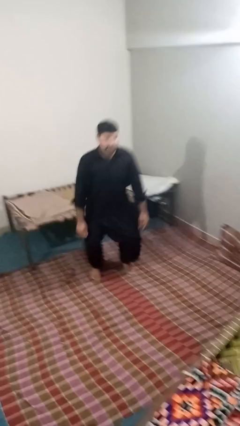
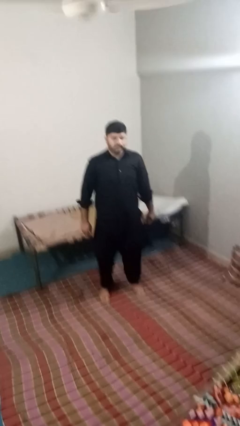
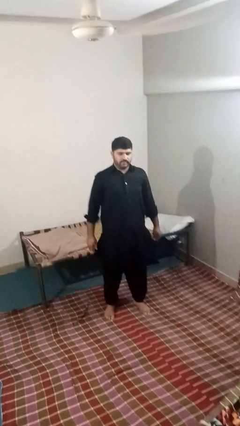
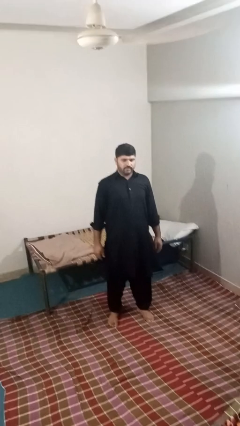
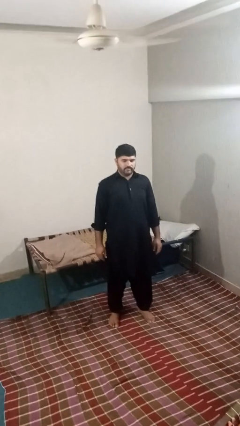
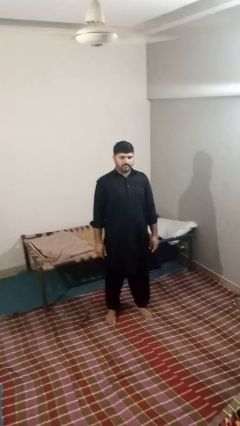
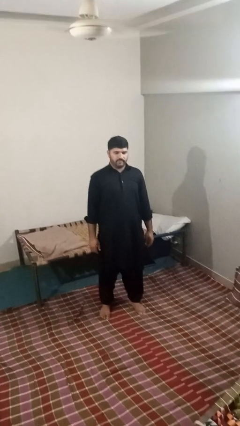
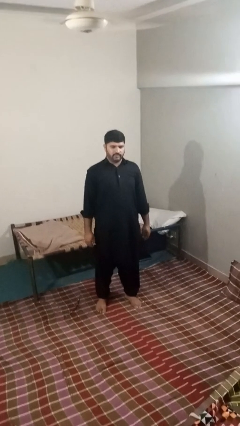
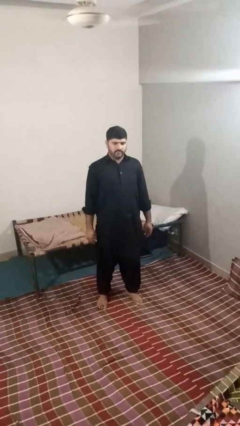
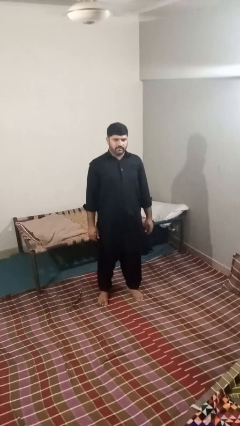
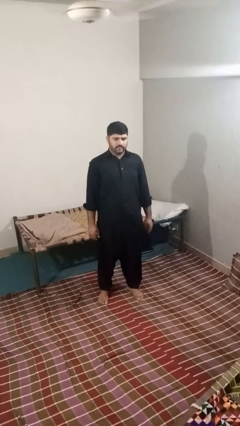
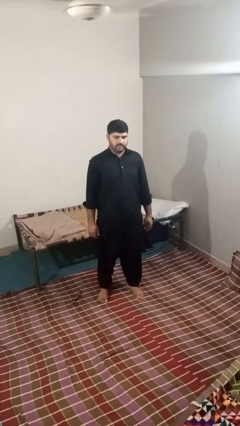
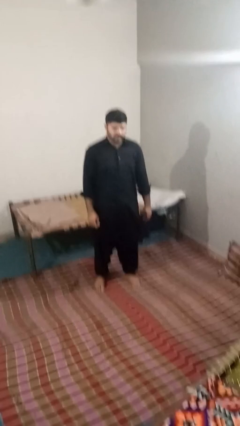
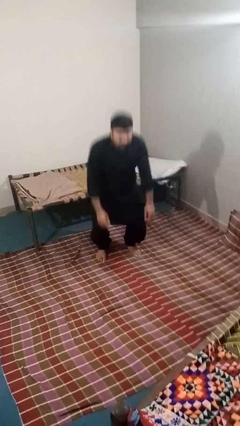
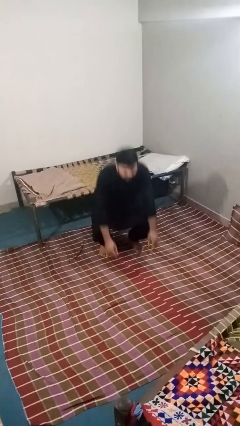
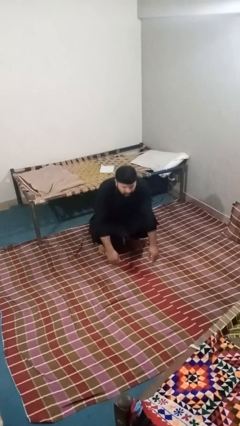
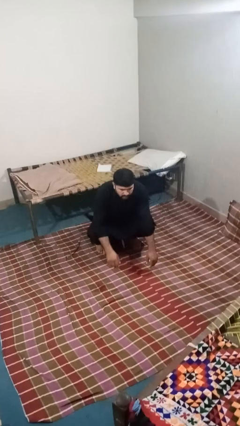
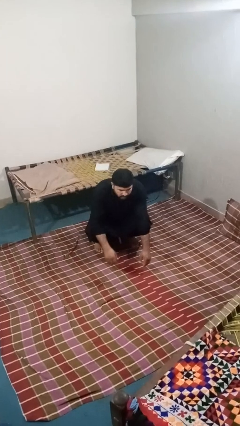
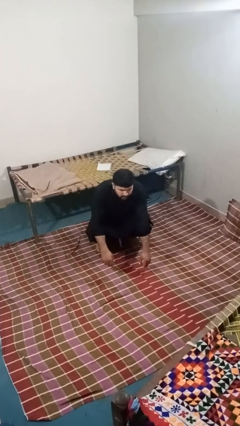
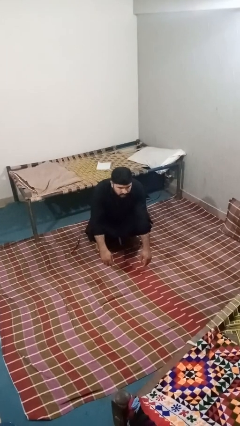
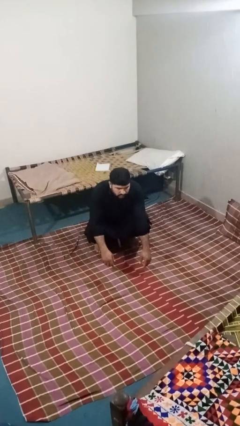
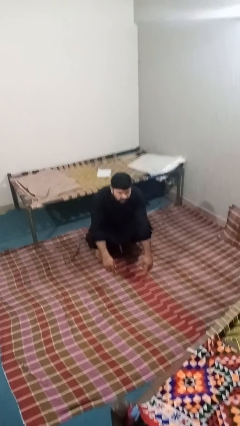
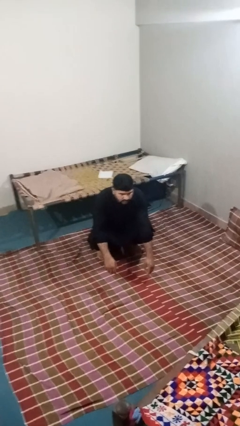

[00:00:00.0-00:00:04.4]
person stands up

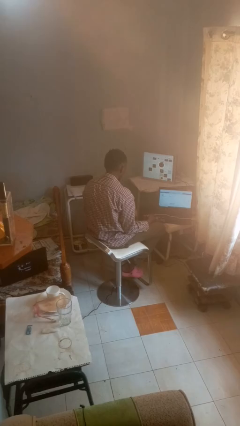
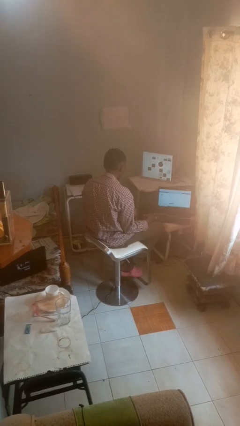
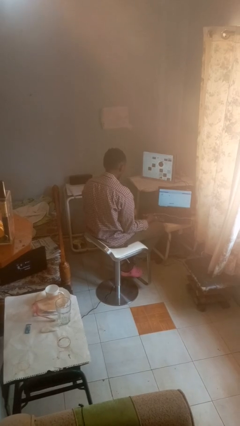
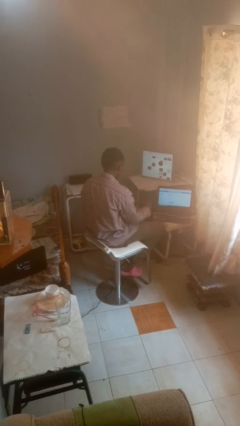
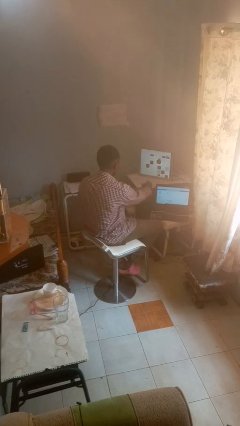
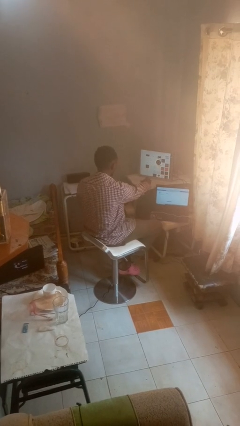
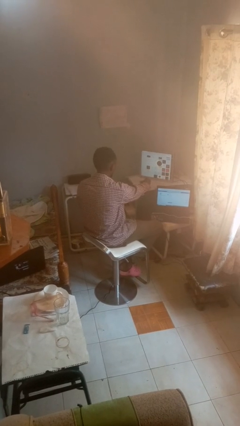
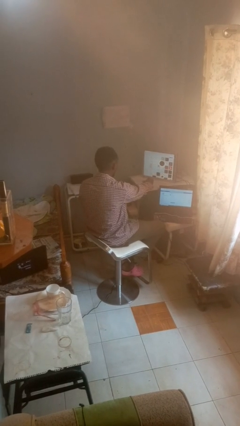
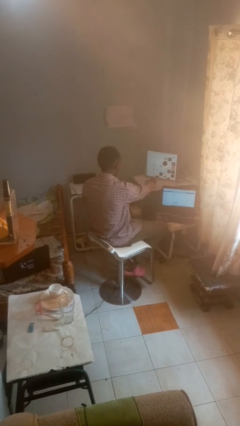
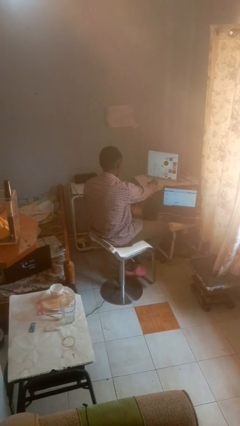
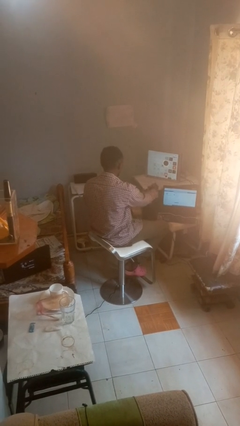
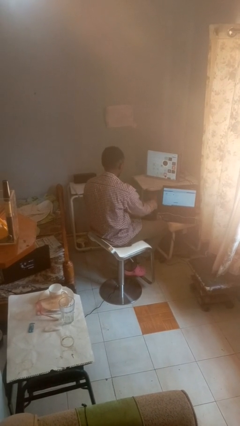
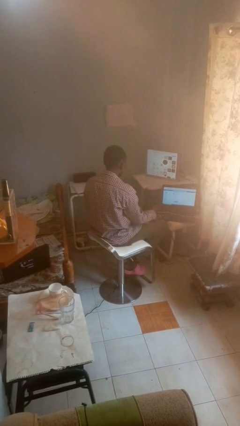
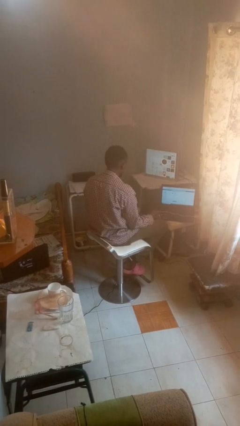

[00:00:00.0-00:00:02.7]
person uses television remote

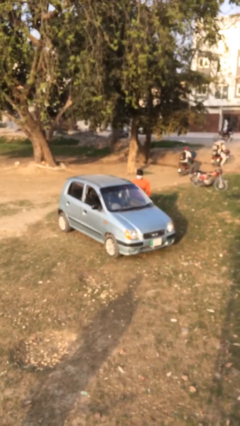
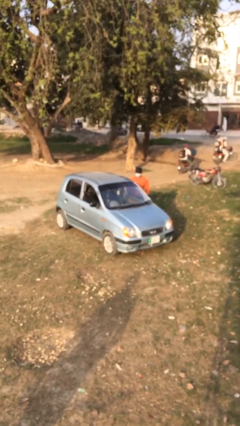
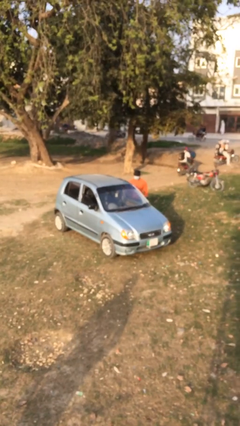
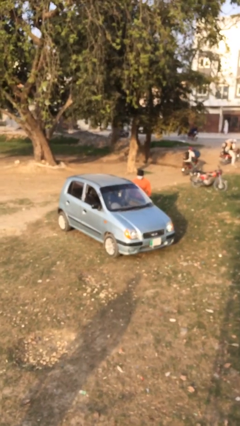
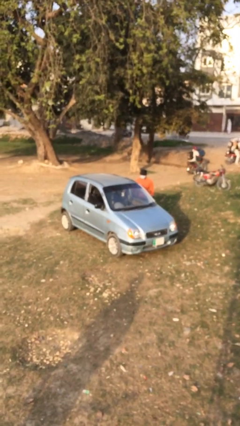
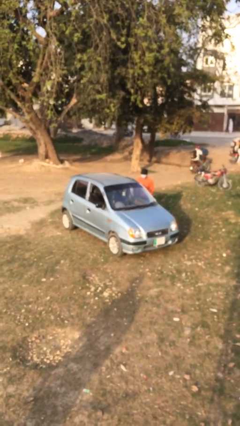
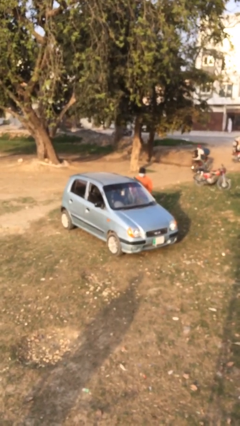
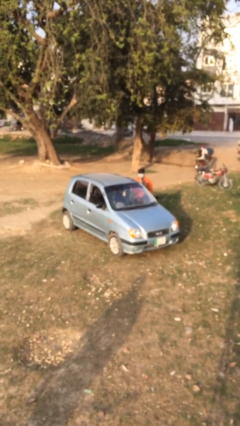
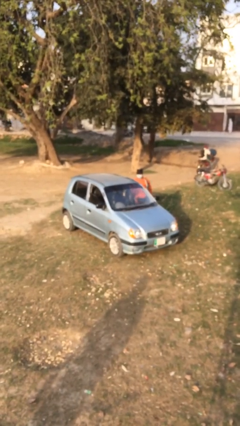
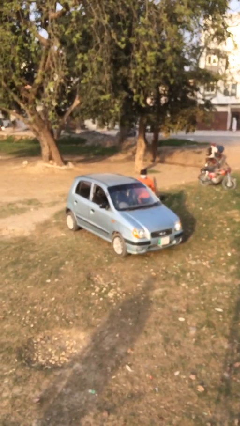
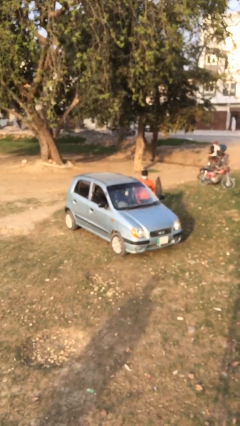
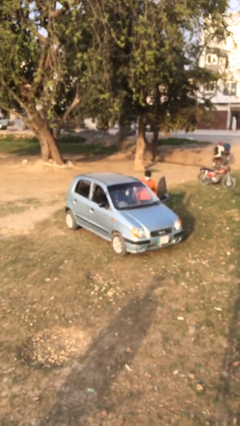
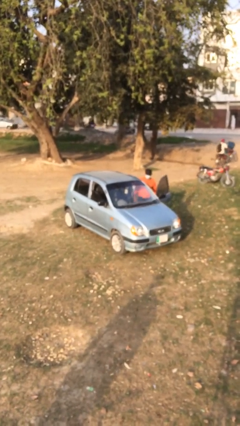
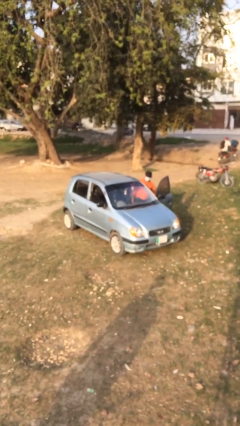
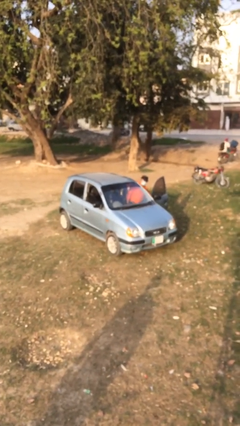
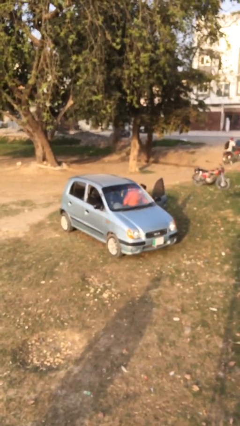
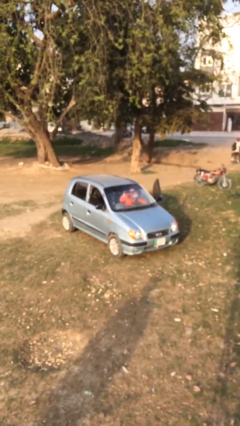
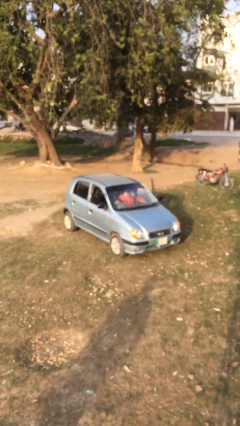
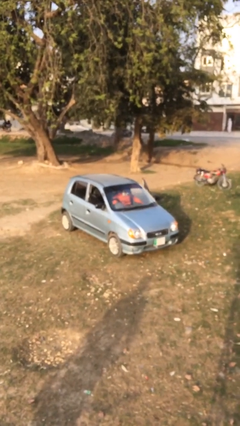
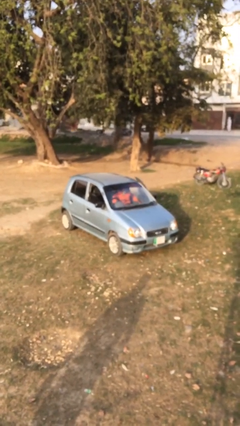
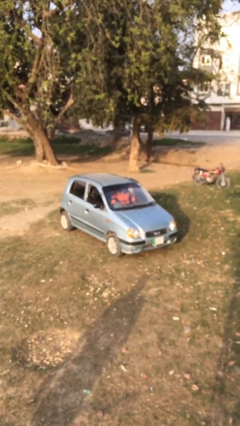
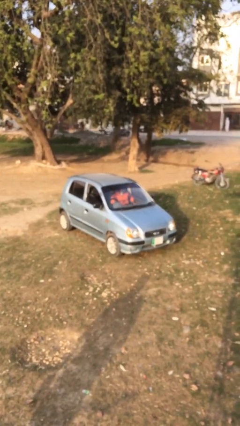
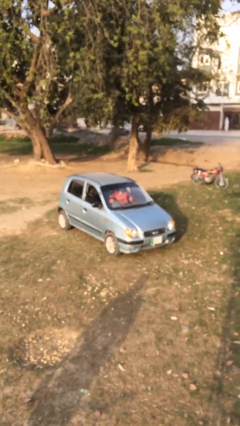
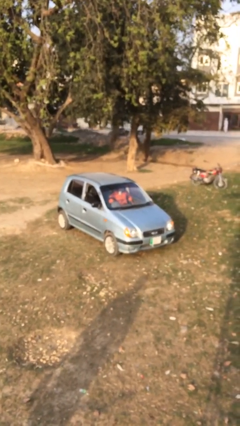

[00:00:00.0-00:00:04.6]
car picks up person

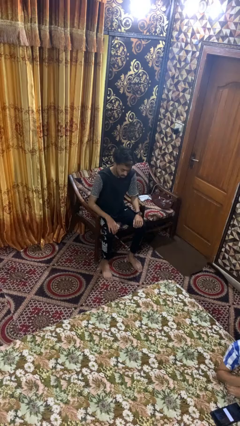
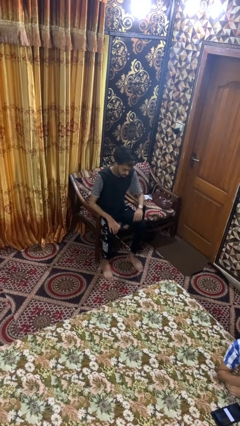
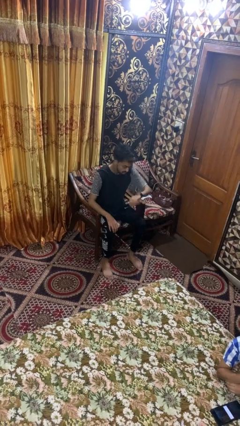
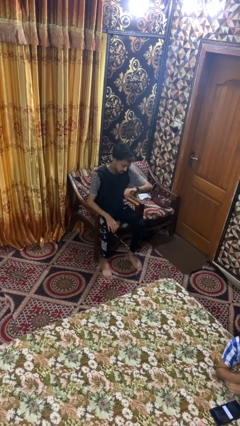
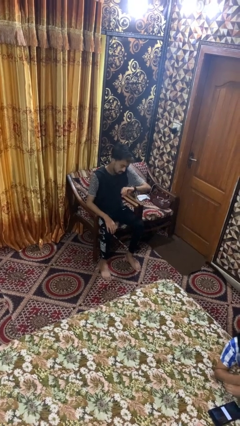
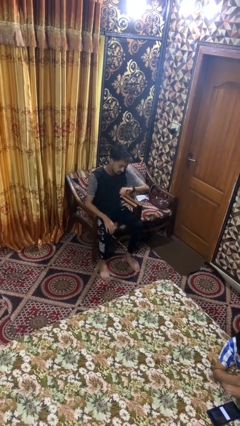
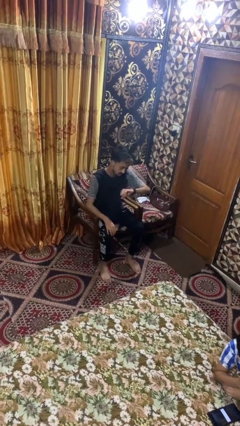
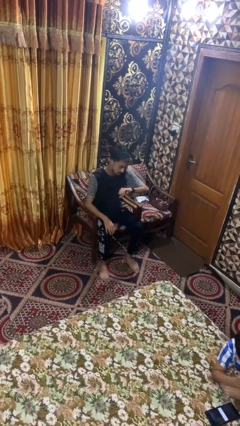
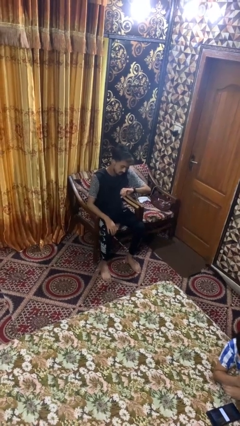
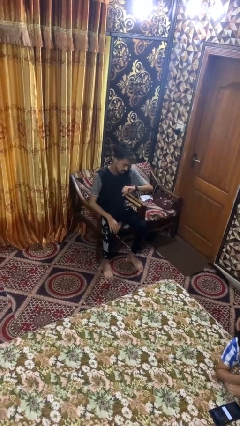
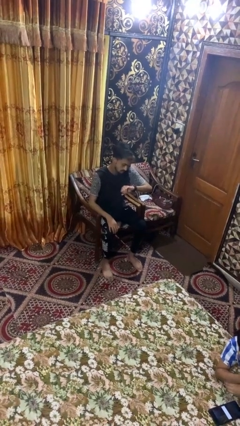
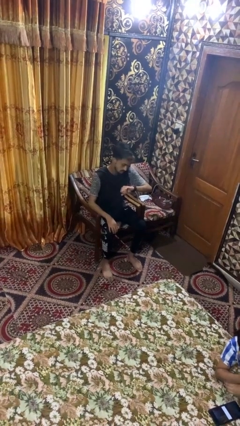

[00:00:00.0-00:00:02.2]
person looks at wristwatch

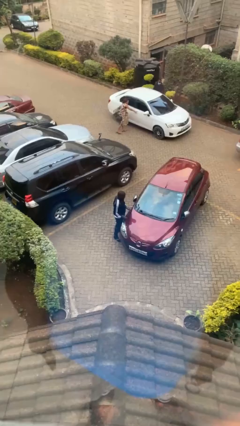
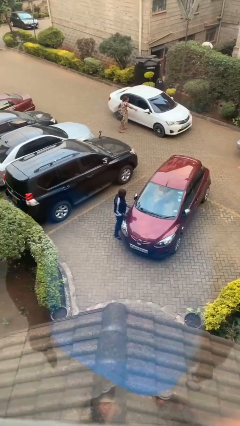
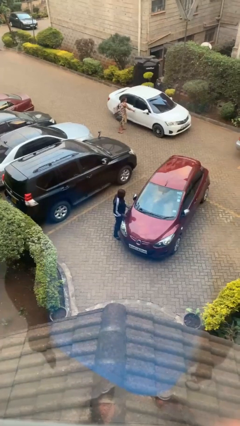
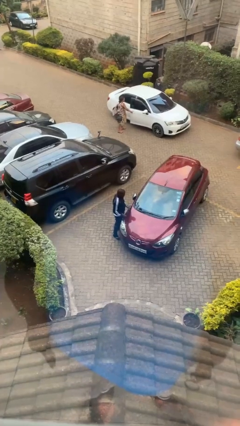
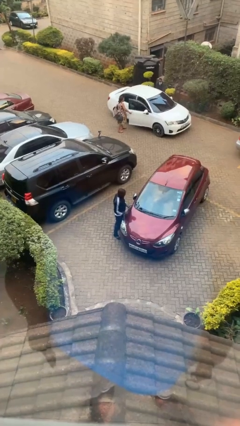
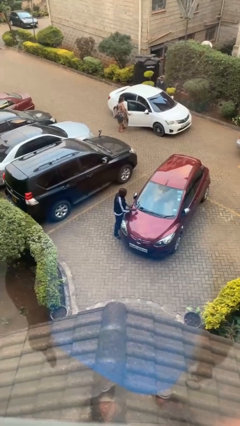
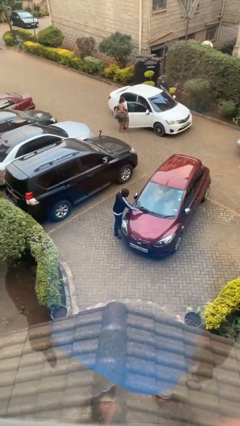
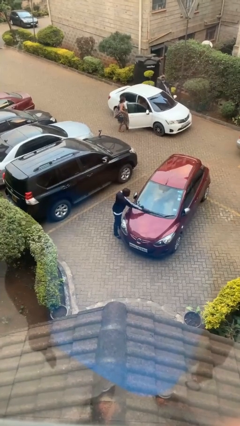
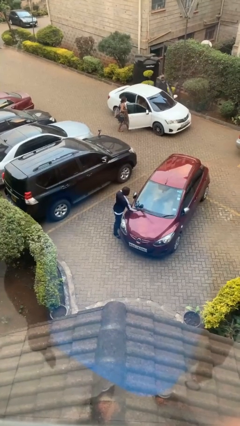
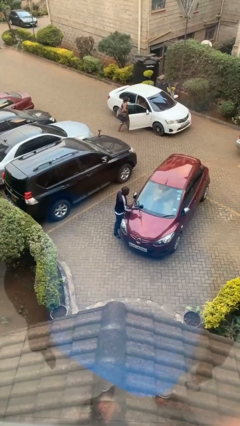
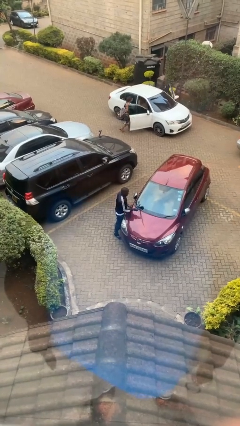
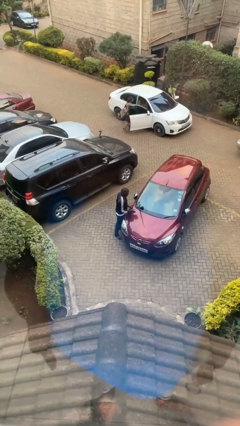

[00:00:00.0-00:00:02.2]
person flips up car wipers

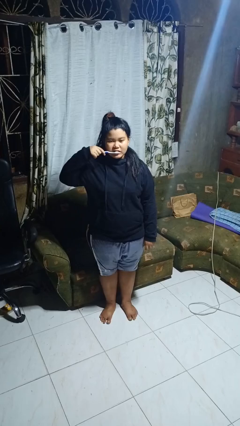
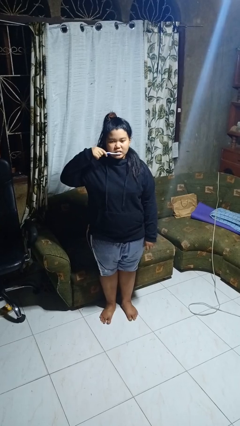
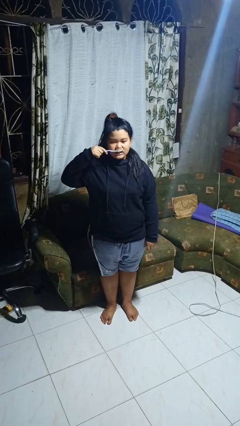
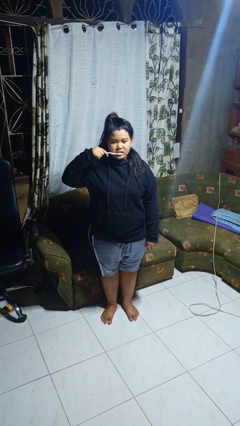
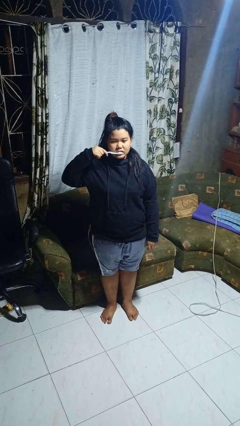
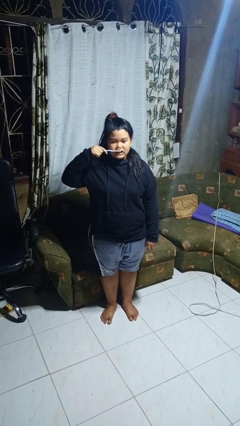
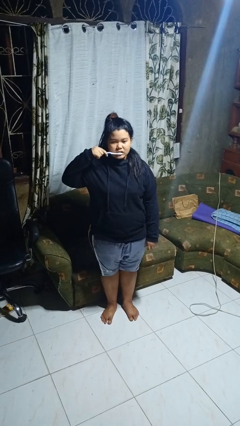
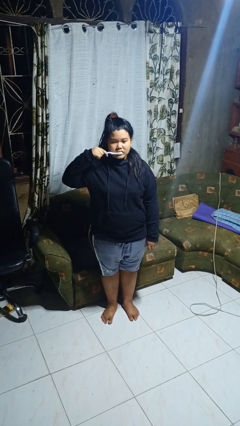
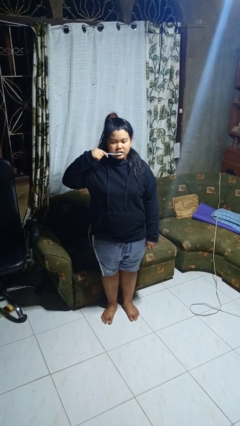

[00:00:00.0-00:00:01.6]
person brushes teeth
